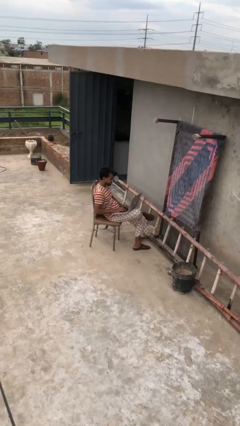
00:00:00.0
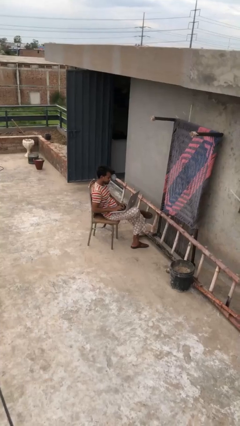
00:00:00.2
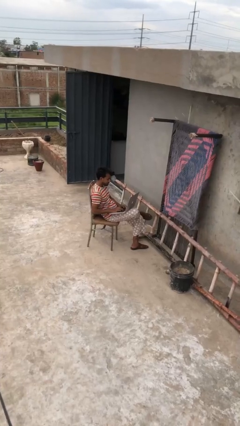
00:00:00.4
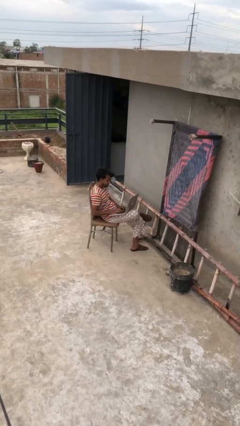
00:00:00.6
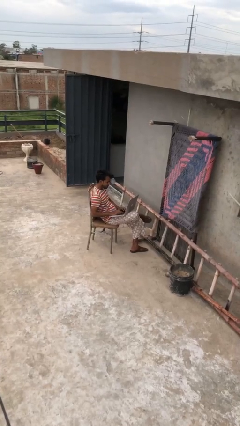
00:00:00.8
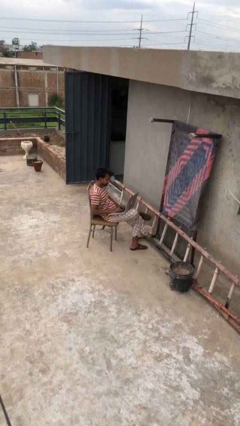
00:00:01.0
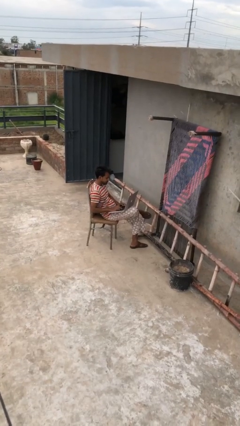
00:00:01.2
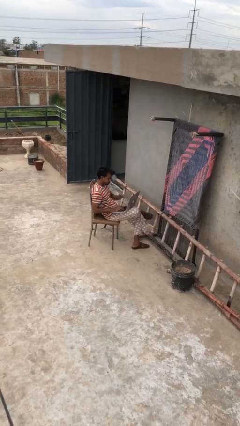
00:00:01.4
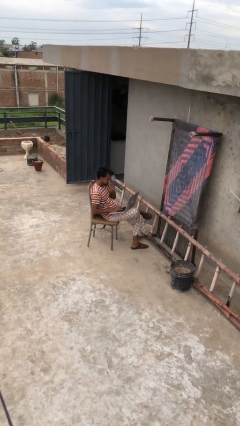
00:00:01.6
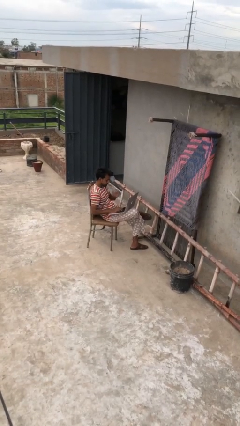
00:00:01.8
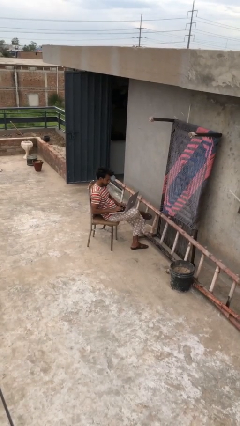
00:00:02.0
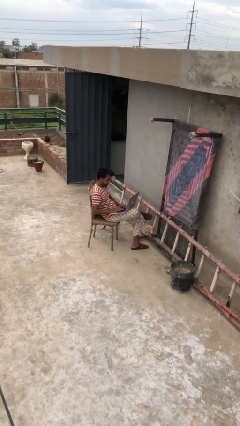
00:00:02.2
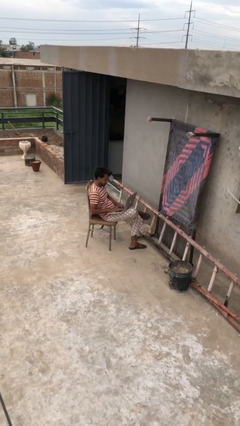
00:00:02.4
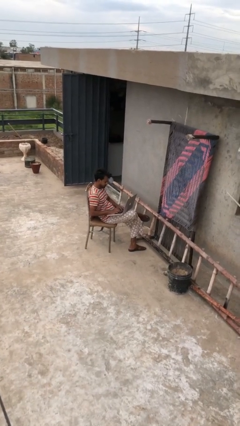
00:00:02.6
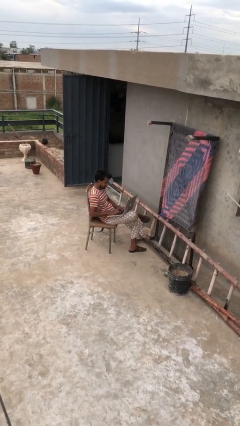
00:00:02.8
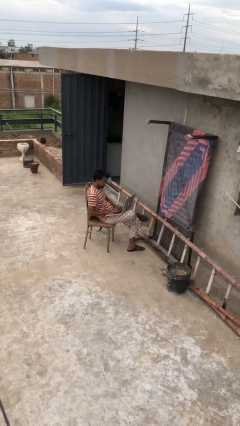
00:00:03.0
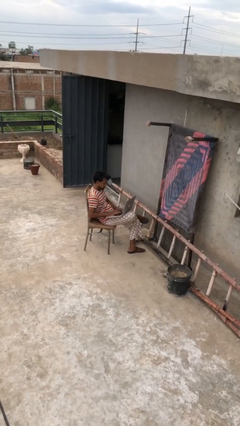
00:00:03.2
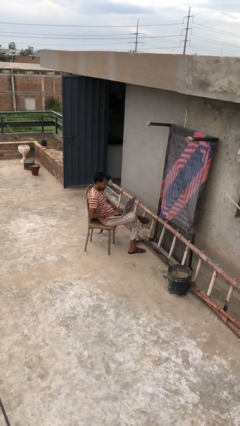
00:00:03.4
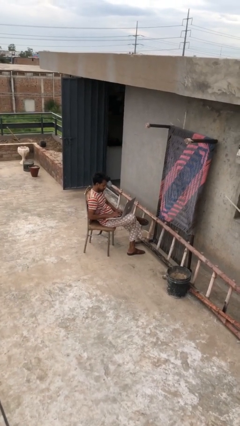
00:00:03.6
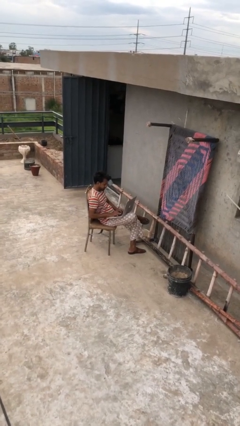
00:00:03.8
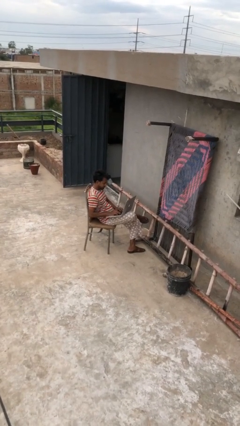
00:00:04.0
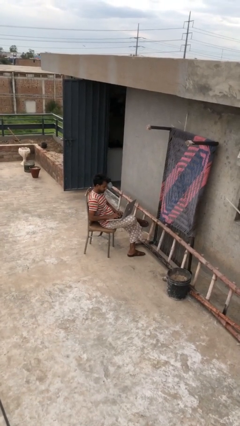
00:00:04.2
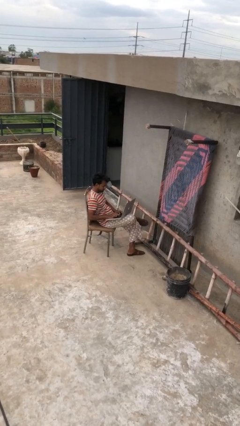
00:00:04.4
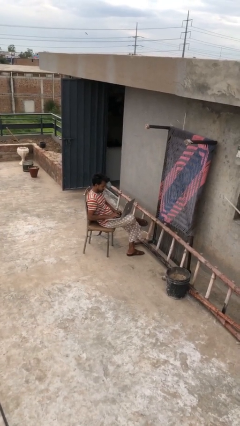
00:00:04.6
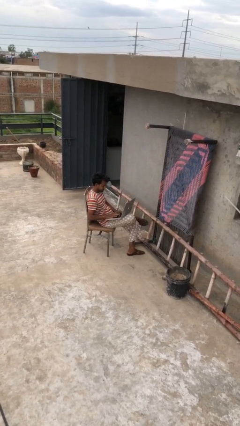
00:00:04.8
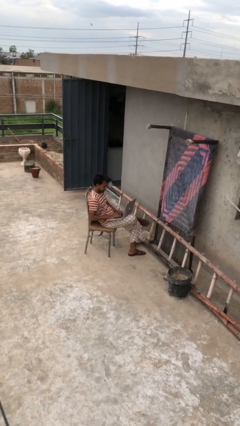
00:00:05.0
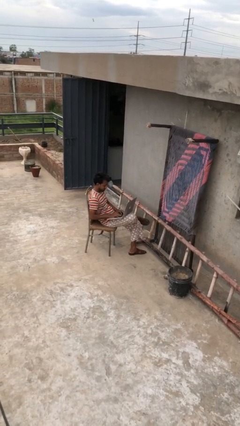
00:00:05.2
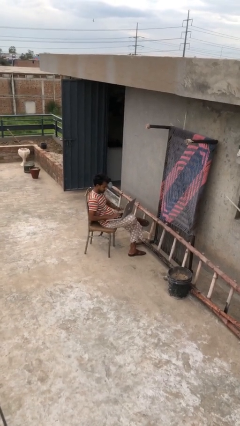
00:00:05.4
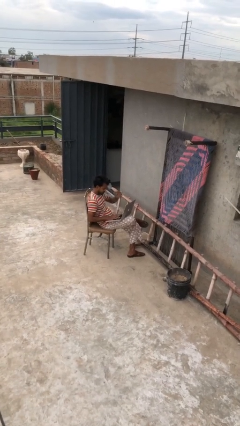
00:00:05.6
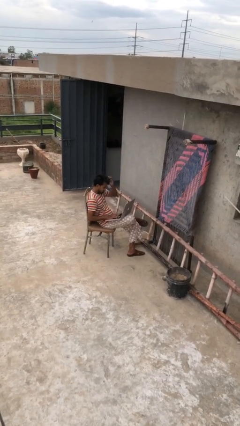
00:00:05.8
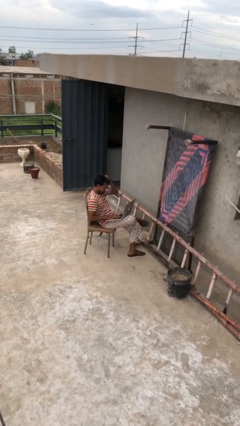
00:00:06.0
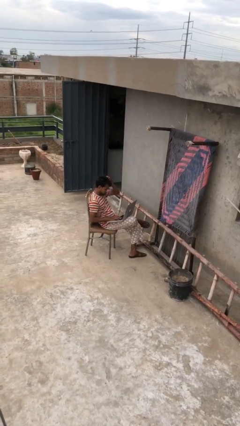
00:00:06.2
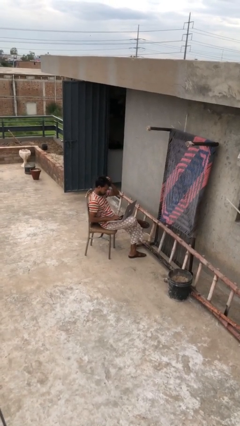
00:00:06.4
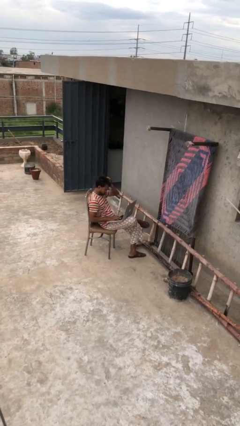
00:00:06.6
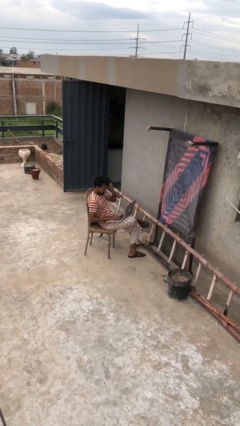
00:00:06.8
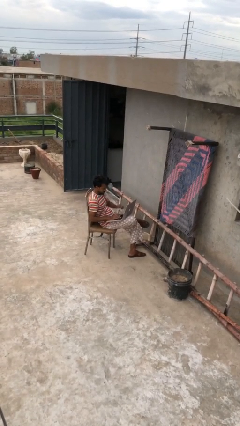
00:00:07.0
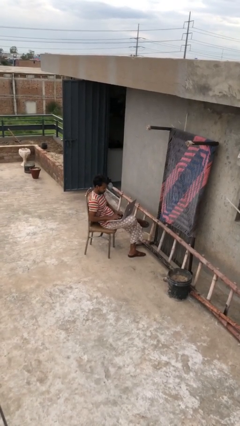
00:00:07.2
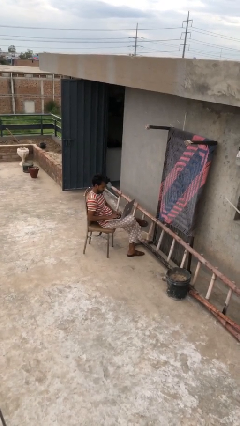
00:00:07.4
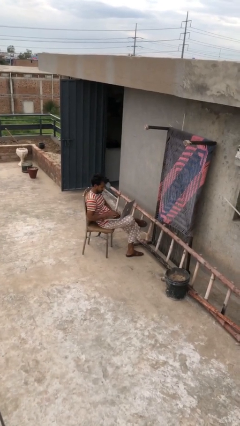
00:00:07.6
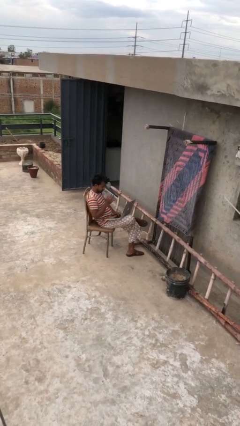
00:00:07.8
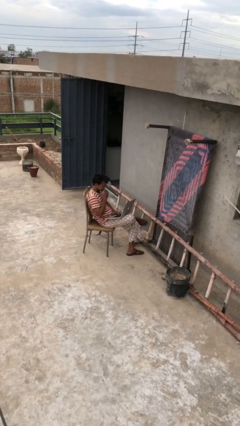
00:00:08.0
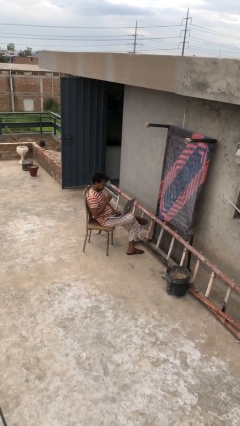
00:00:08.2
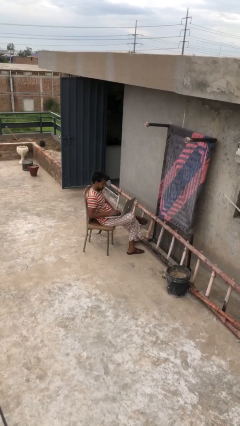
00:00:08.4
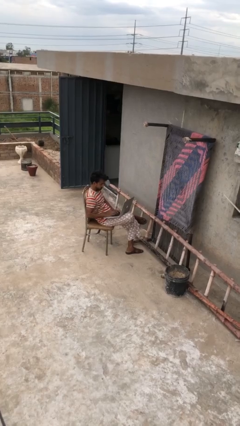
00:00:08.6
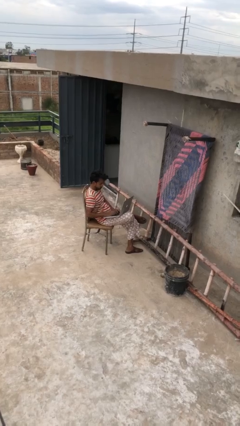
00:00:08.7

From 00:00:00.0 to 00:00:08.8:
person interacts with laptop

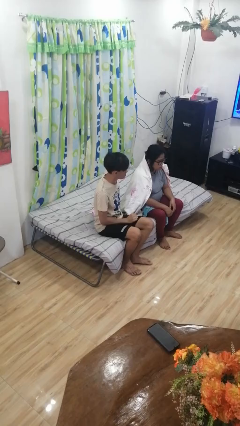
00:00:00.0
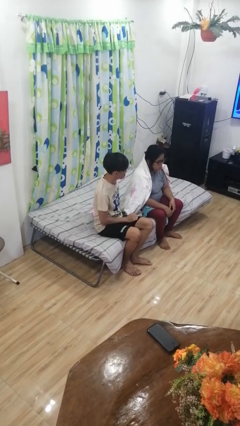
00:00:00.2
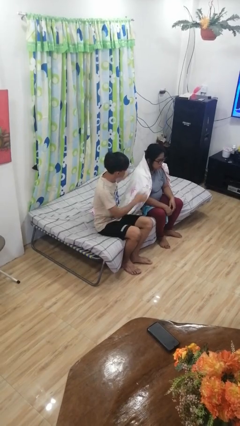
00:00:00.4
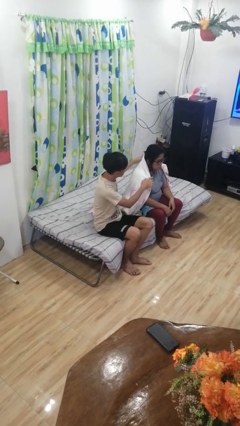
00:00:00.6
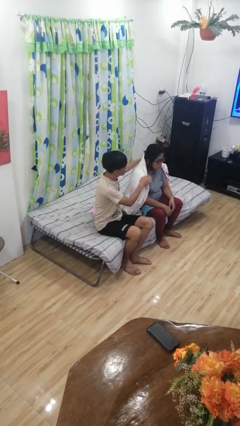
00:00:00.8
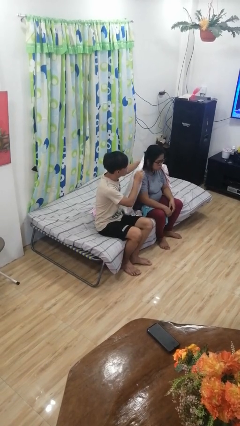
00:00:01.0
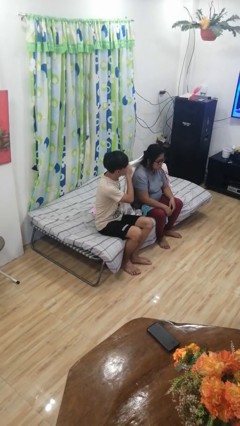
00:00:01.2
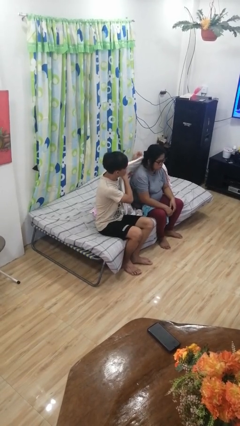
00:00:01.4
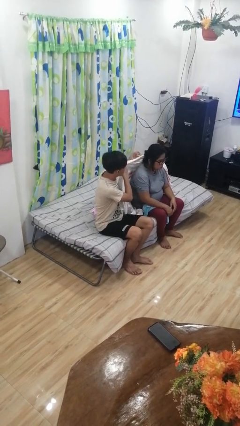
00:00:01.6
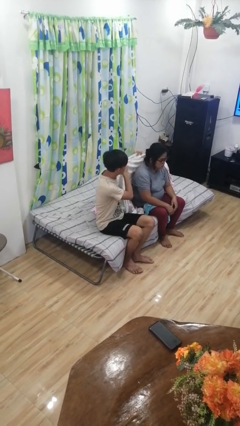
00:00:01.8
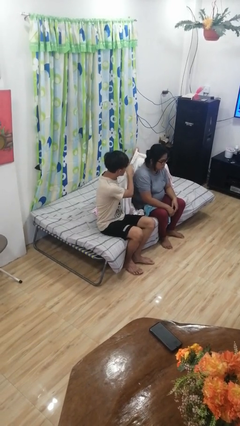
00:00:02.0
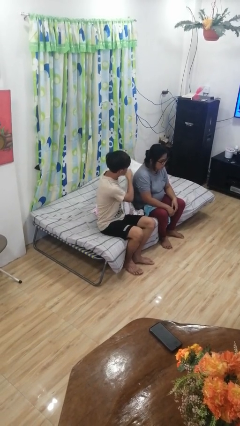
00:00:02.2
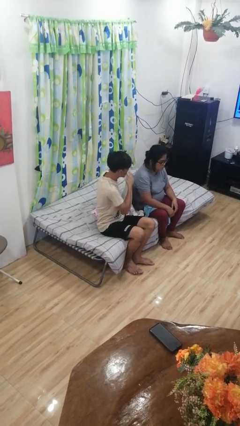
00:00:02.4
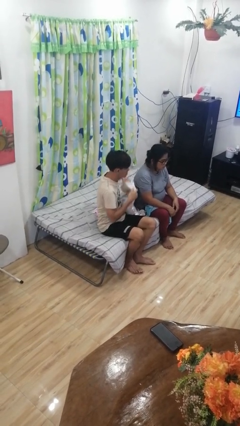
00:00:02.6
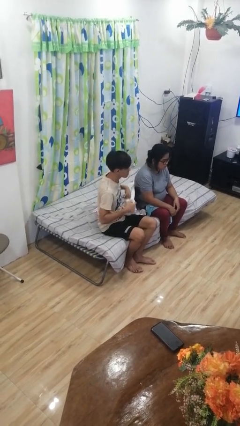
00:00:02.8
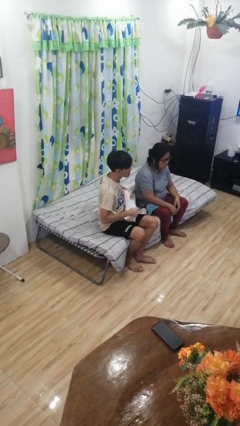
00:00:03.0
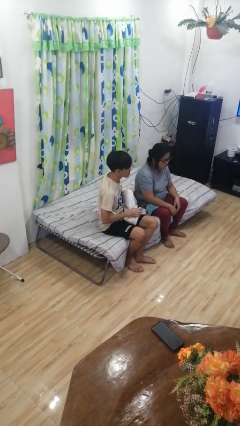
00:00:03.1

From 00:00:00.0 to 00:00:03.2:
person uncovers friend with blanket

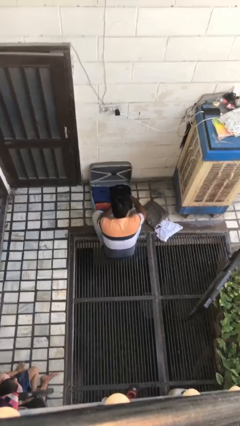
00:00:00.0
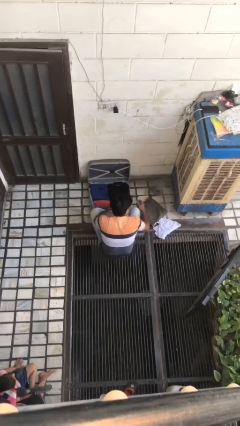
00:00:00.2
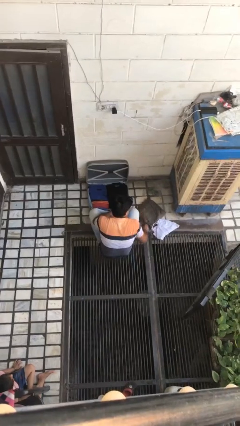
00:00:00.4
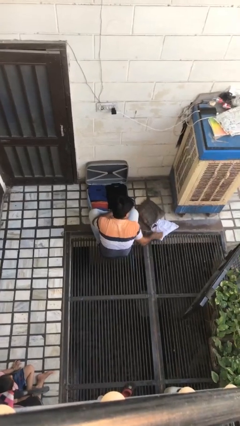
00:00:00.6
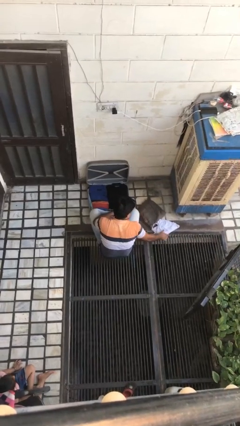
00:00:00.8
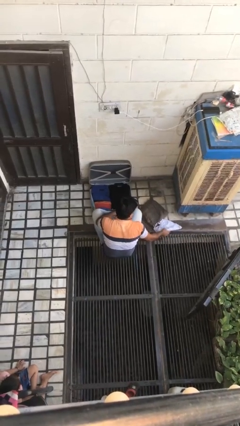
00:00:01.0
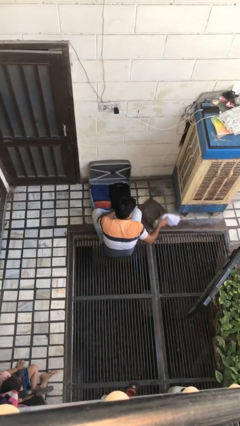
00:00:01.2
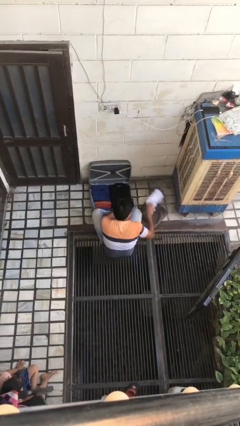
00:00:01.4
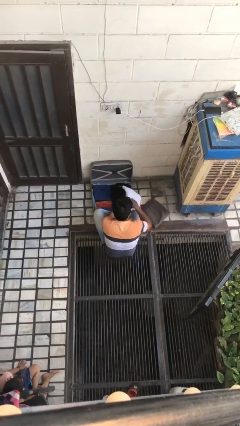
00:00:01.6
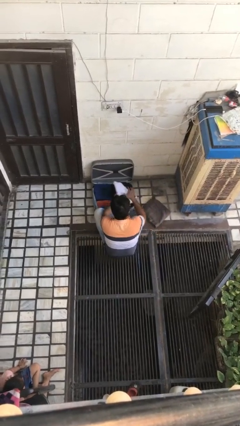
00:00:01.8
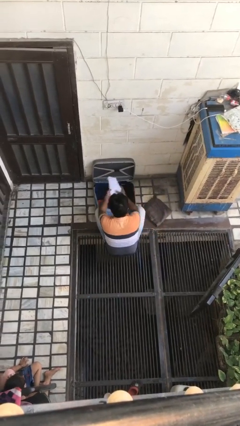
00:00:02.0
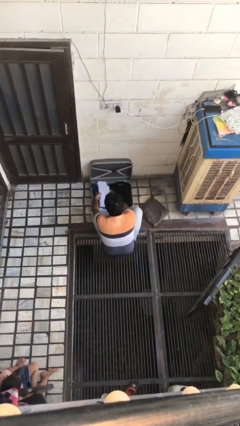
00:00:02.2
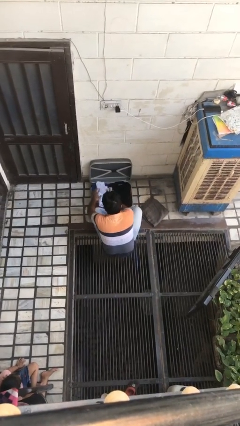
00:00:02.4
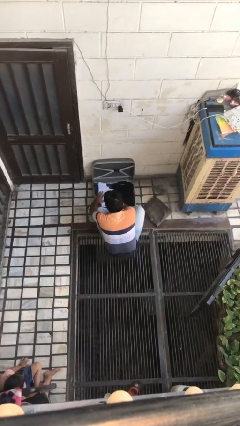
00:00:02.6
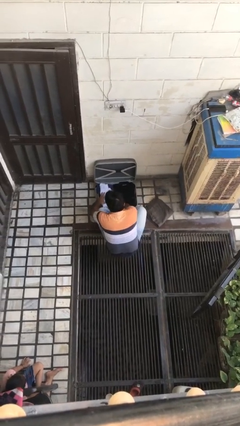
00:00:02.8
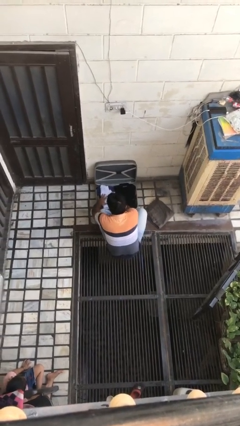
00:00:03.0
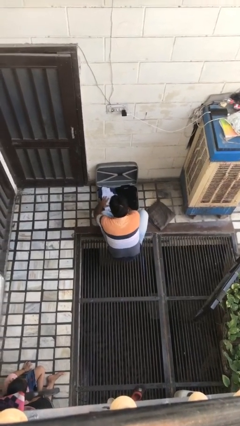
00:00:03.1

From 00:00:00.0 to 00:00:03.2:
person loads clothes into suitcase

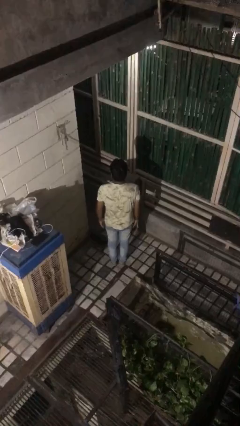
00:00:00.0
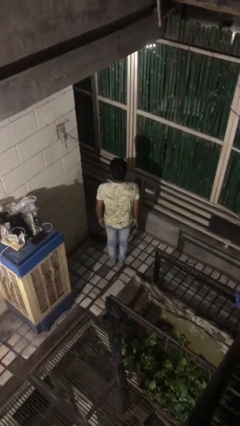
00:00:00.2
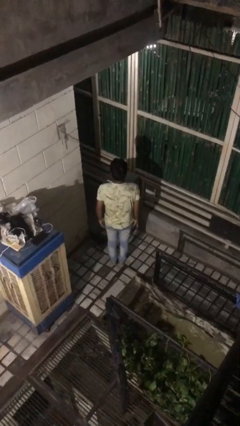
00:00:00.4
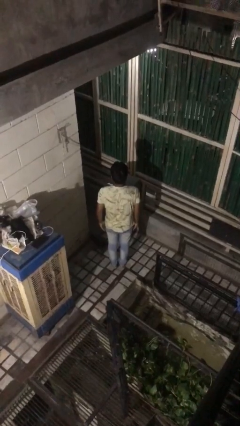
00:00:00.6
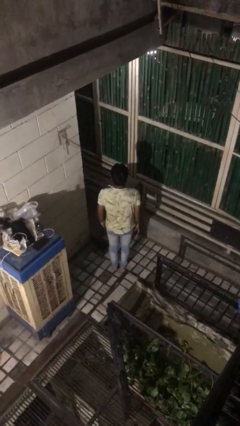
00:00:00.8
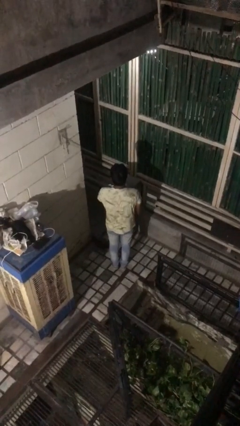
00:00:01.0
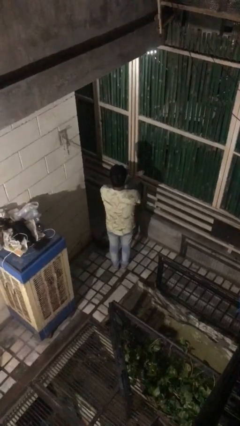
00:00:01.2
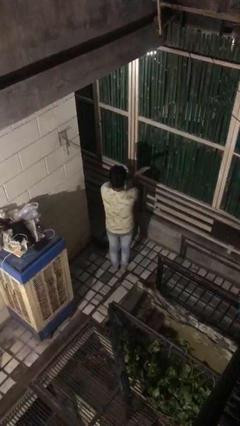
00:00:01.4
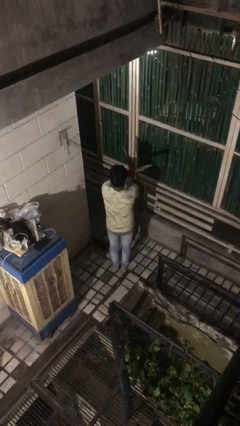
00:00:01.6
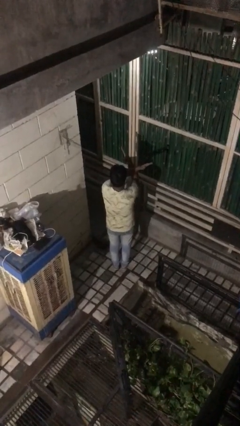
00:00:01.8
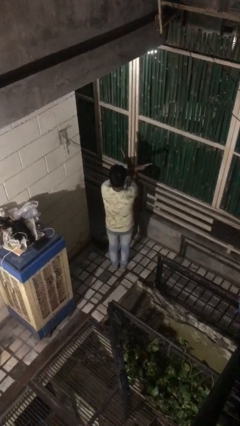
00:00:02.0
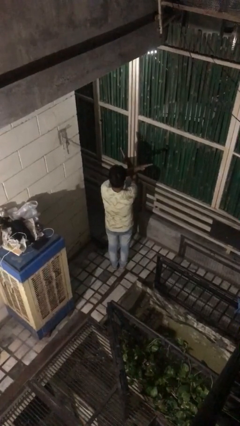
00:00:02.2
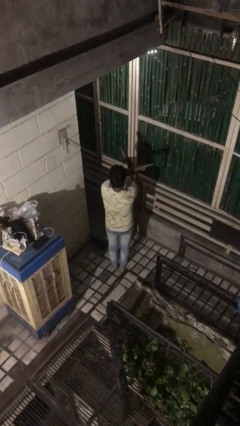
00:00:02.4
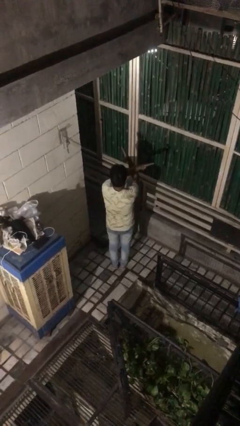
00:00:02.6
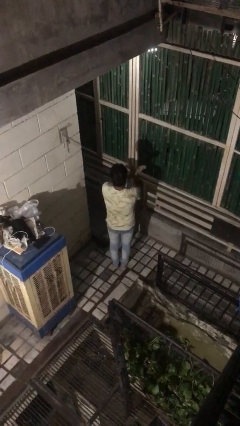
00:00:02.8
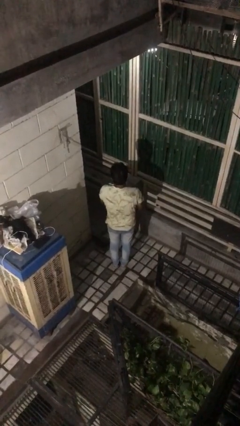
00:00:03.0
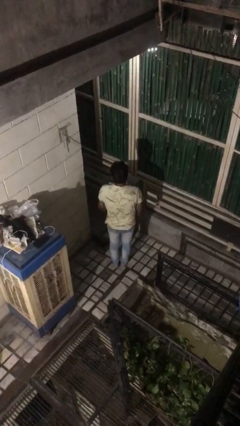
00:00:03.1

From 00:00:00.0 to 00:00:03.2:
person gestures arms x
